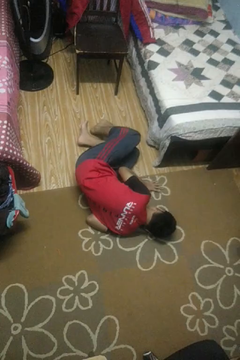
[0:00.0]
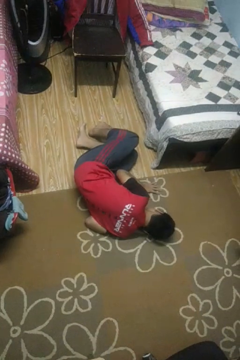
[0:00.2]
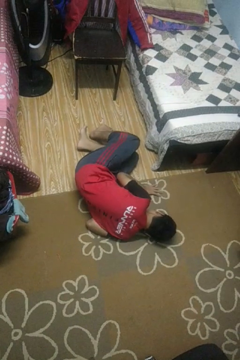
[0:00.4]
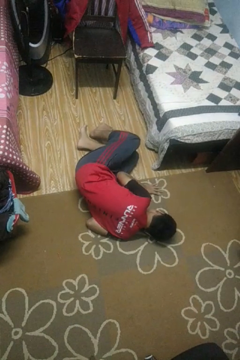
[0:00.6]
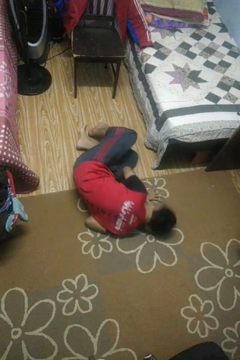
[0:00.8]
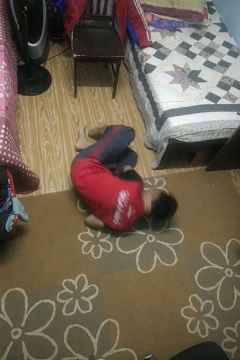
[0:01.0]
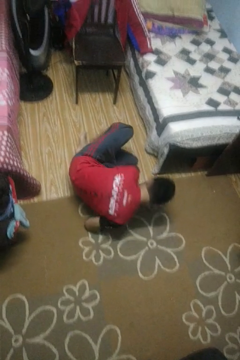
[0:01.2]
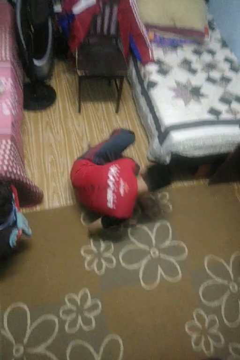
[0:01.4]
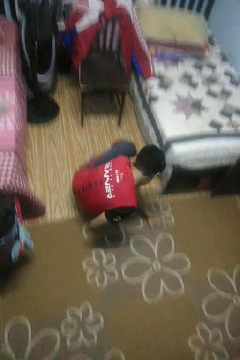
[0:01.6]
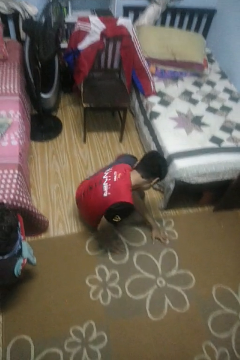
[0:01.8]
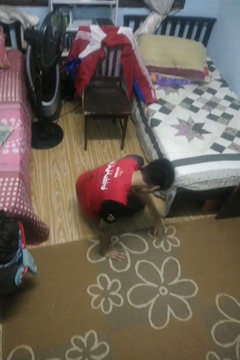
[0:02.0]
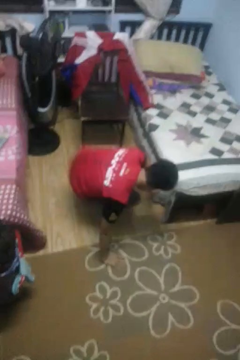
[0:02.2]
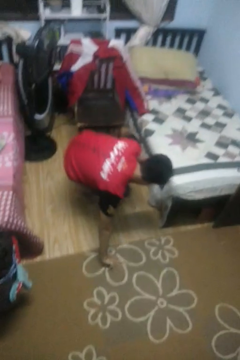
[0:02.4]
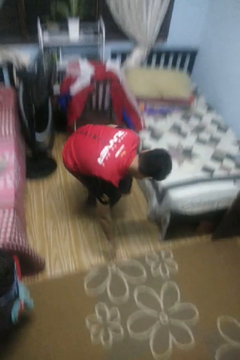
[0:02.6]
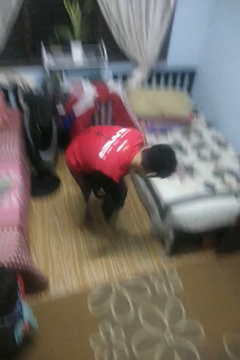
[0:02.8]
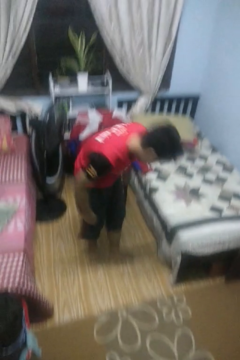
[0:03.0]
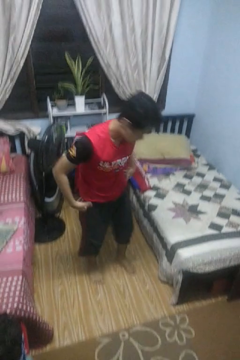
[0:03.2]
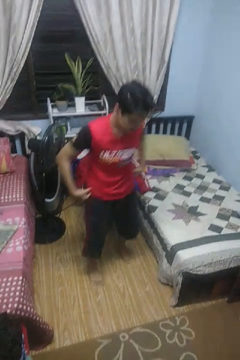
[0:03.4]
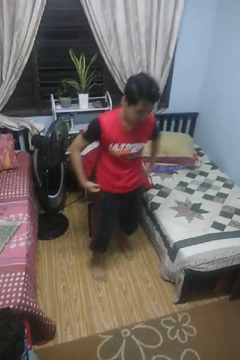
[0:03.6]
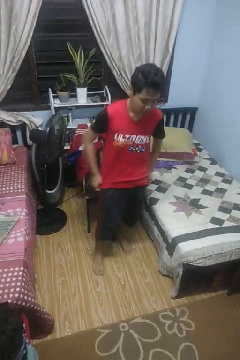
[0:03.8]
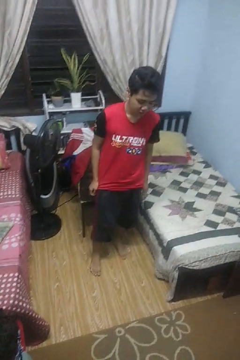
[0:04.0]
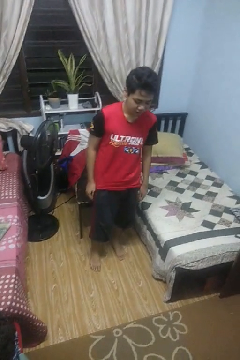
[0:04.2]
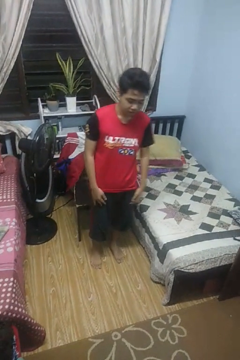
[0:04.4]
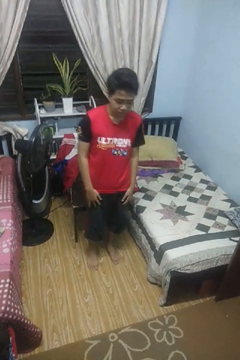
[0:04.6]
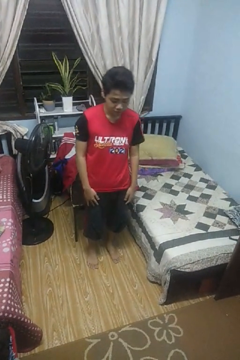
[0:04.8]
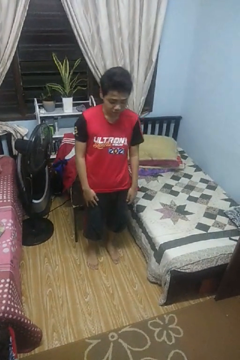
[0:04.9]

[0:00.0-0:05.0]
person stands up from floor

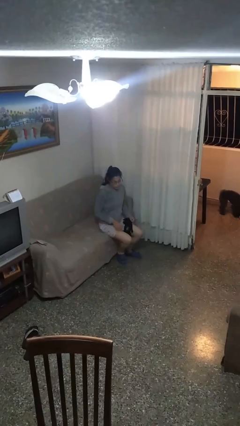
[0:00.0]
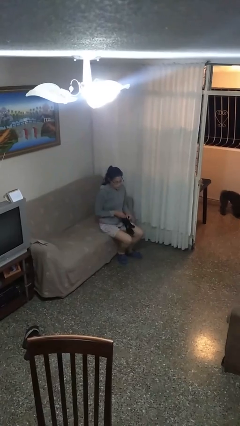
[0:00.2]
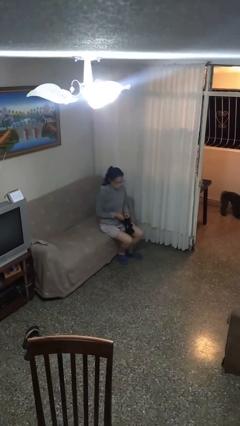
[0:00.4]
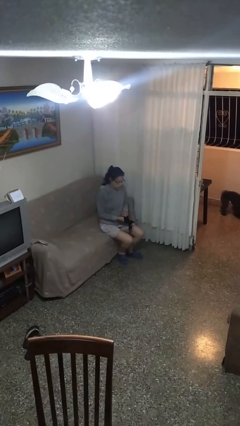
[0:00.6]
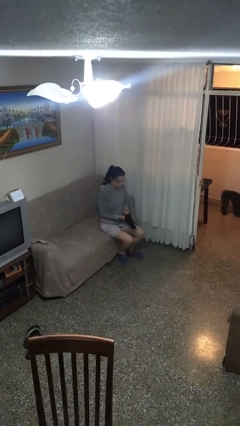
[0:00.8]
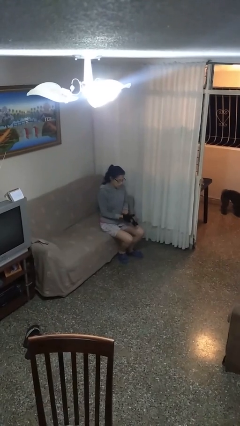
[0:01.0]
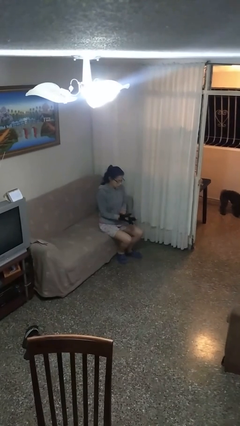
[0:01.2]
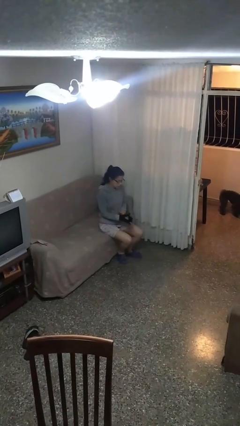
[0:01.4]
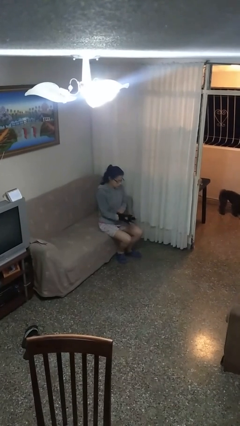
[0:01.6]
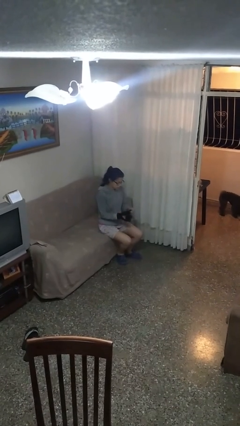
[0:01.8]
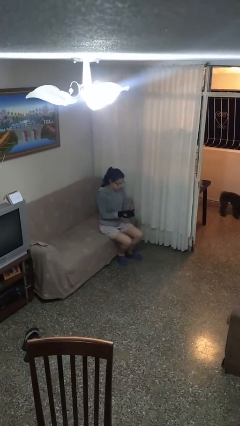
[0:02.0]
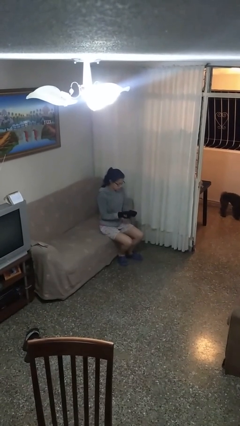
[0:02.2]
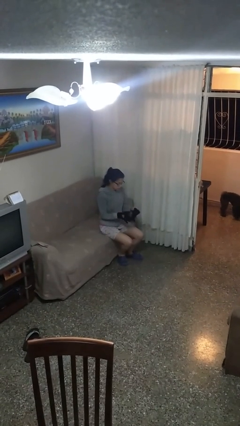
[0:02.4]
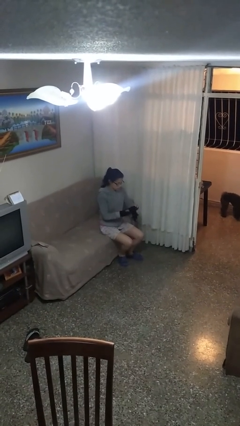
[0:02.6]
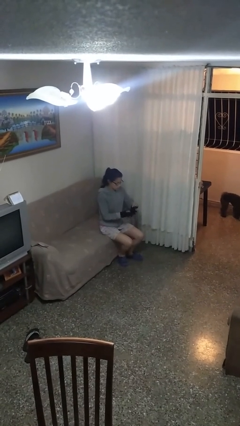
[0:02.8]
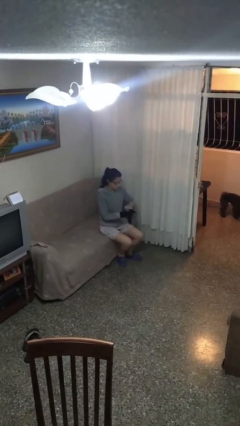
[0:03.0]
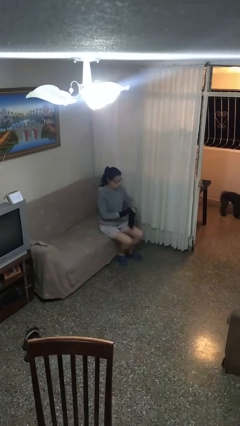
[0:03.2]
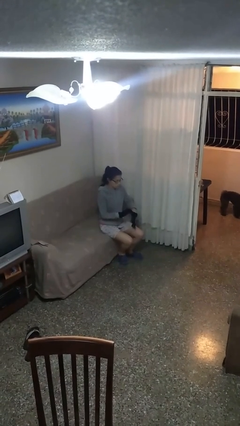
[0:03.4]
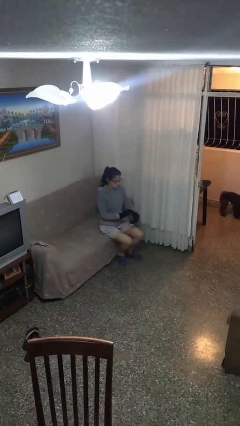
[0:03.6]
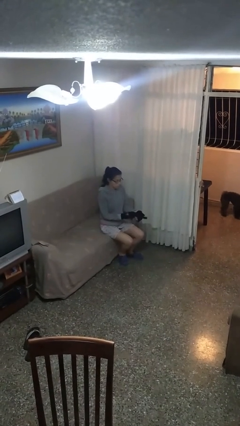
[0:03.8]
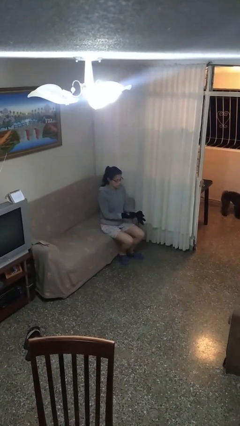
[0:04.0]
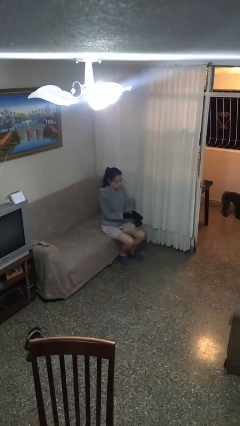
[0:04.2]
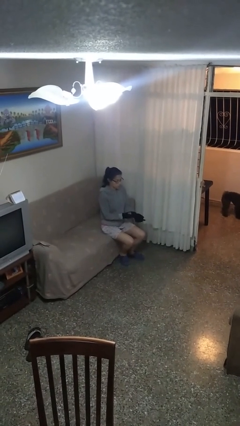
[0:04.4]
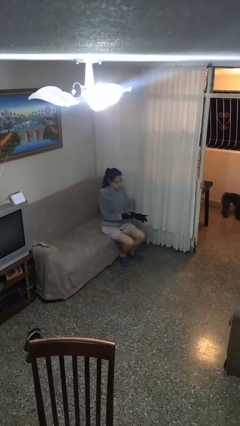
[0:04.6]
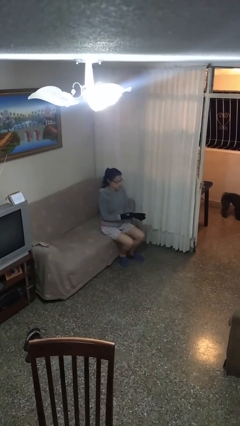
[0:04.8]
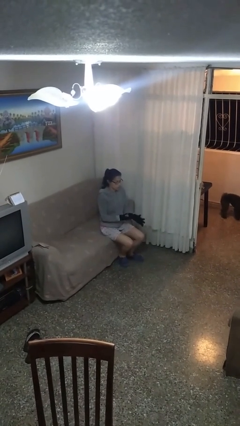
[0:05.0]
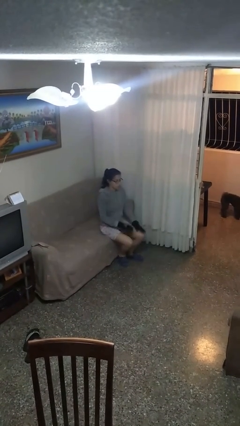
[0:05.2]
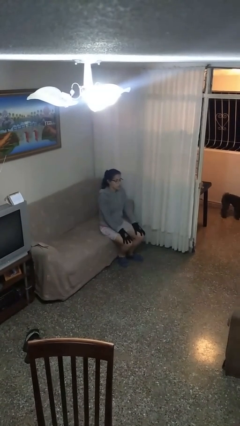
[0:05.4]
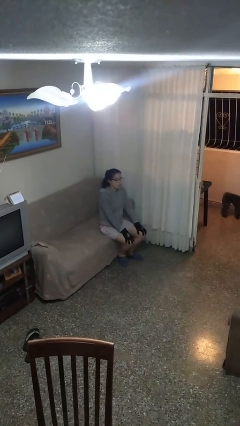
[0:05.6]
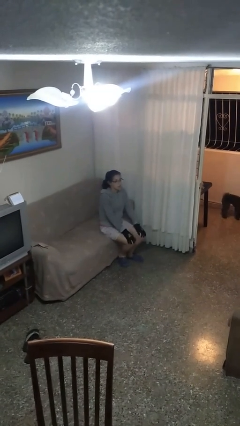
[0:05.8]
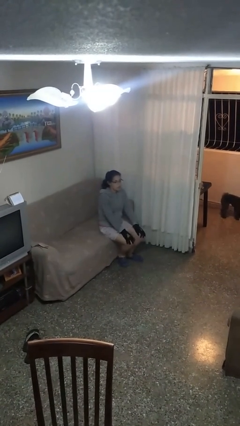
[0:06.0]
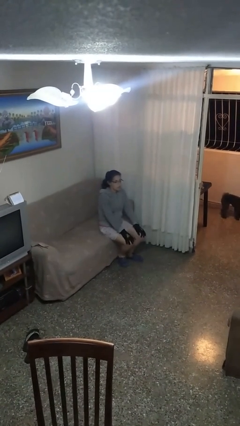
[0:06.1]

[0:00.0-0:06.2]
person puts on gloves

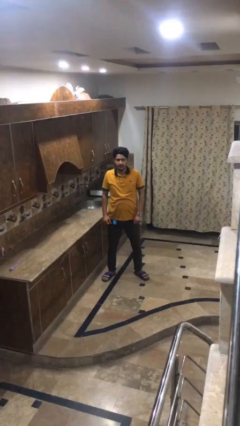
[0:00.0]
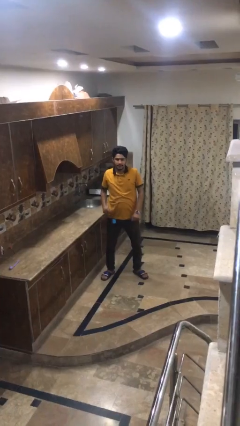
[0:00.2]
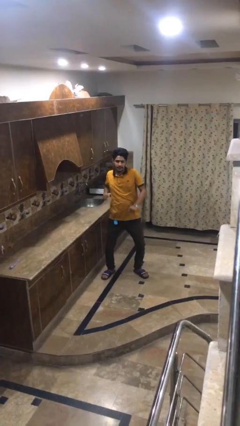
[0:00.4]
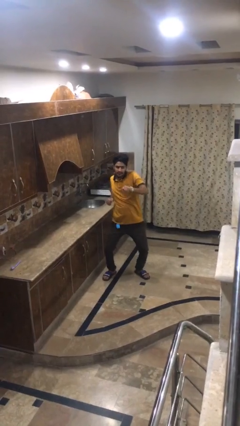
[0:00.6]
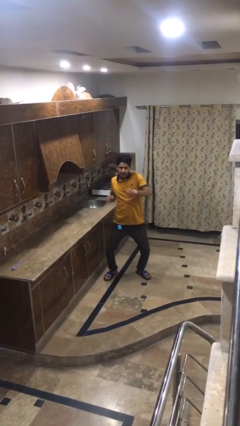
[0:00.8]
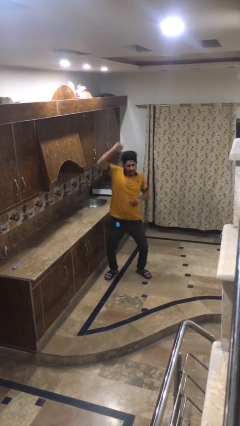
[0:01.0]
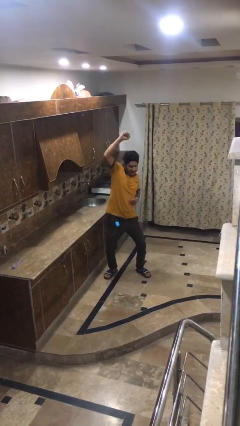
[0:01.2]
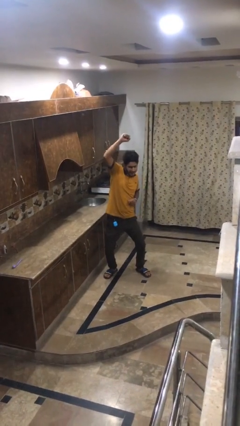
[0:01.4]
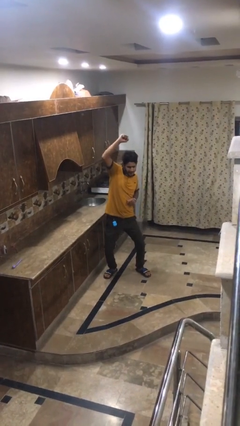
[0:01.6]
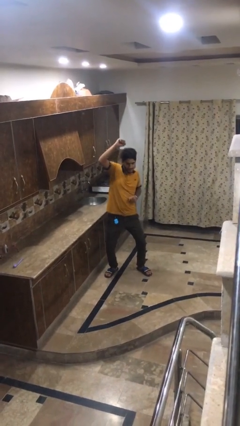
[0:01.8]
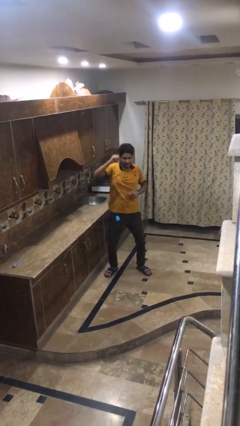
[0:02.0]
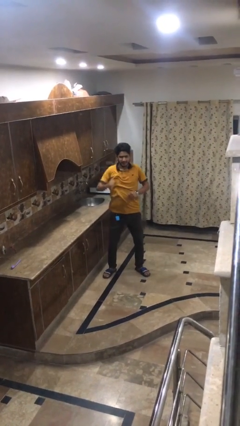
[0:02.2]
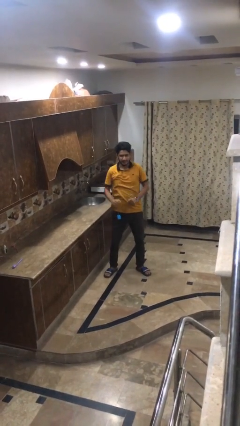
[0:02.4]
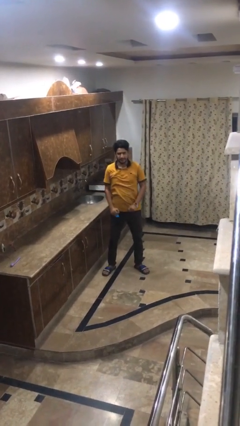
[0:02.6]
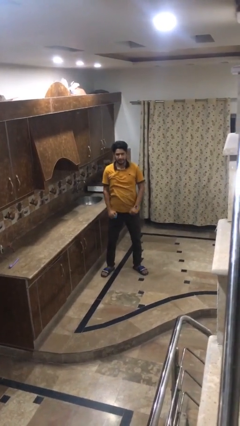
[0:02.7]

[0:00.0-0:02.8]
person punches

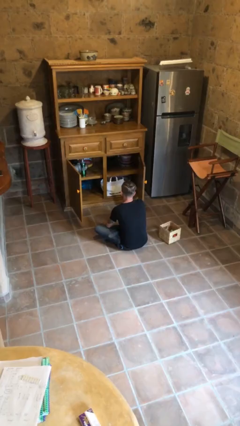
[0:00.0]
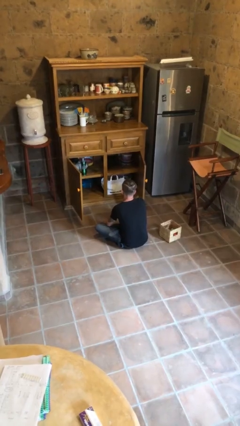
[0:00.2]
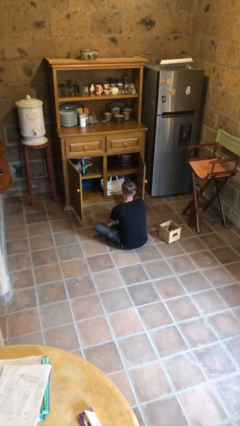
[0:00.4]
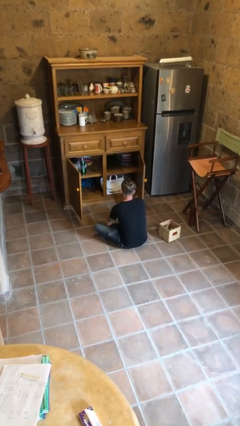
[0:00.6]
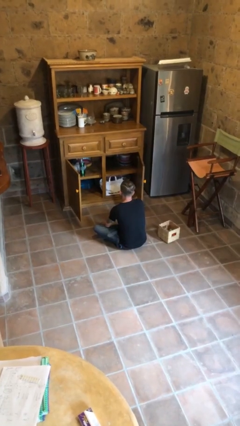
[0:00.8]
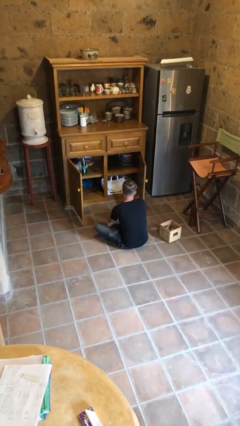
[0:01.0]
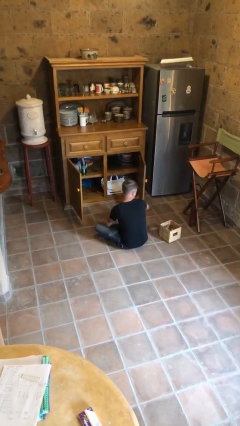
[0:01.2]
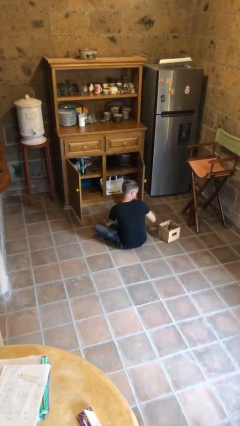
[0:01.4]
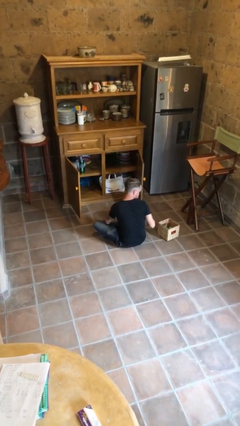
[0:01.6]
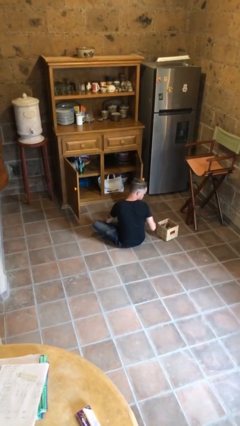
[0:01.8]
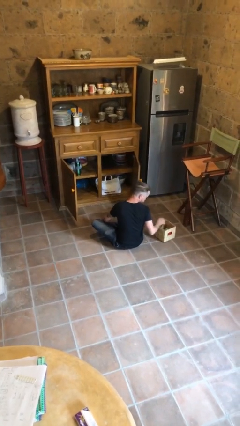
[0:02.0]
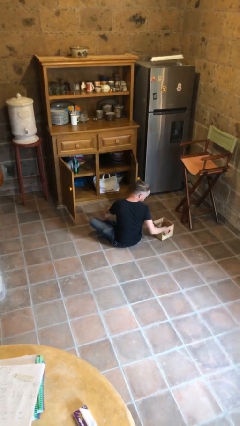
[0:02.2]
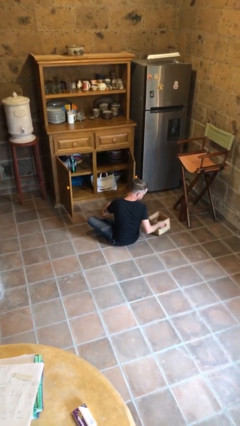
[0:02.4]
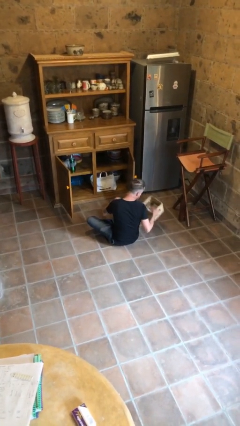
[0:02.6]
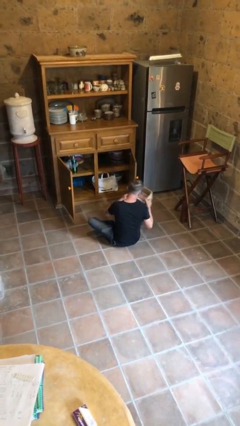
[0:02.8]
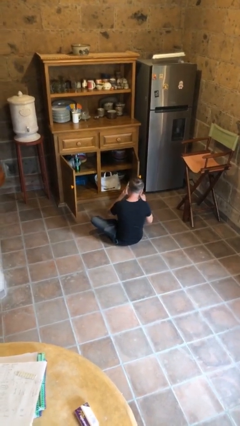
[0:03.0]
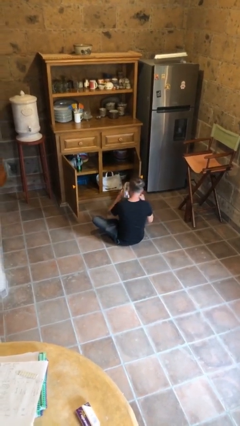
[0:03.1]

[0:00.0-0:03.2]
person picks up object from floor

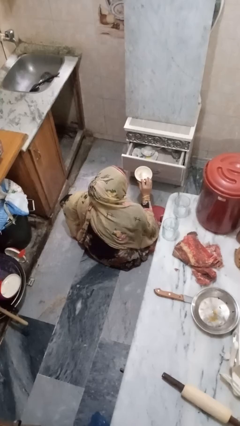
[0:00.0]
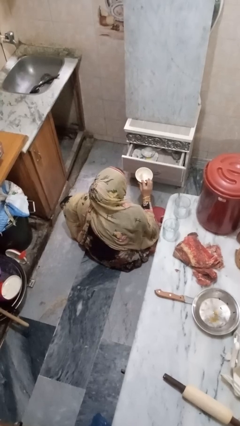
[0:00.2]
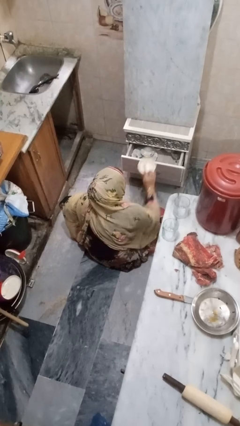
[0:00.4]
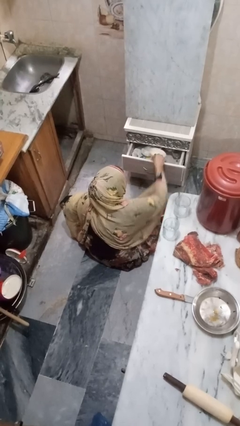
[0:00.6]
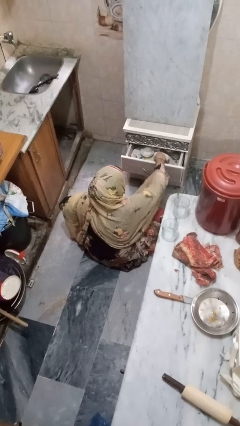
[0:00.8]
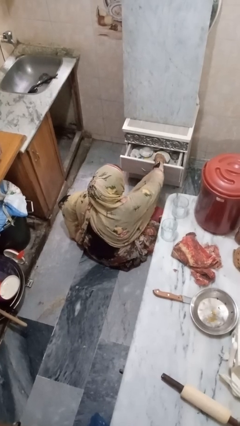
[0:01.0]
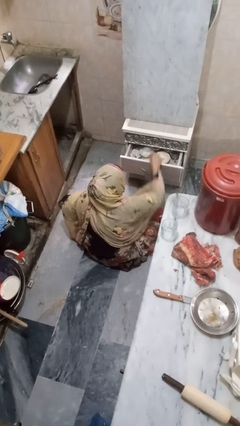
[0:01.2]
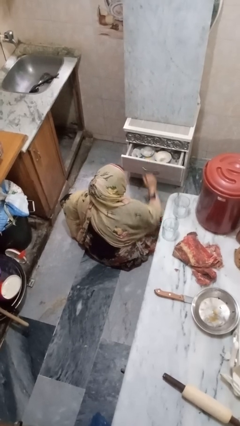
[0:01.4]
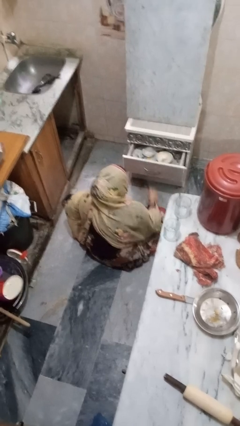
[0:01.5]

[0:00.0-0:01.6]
person puts object into kitchen drawer

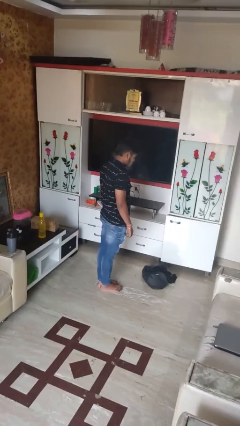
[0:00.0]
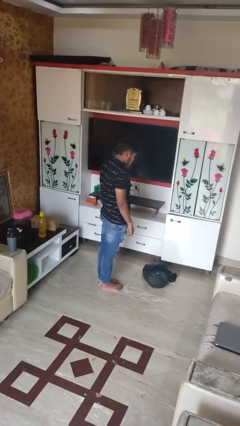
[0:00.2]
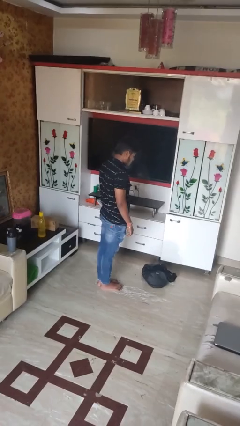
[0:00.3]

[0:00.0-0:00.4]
person drops object
